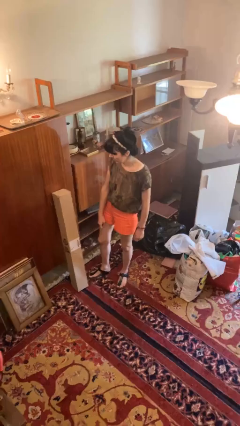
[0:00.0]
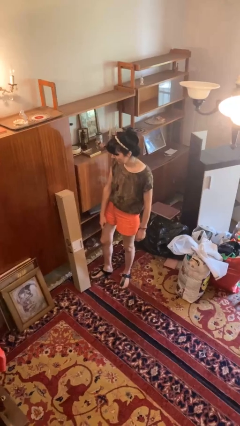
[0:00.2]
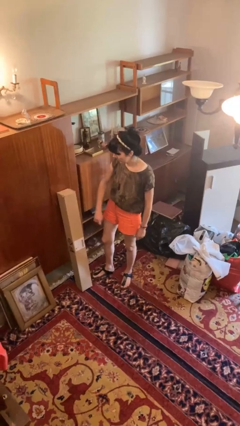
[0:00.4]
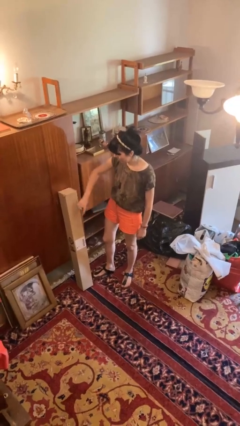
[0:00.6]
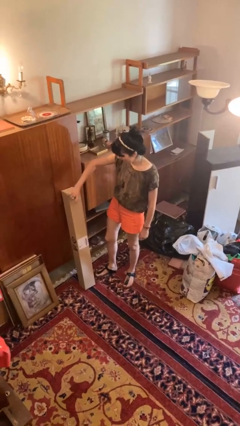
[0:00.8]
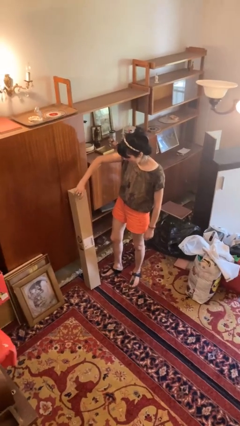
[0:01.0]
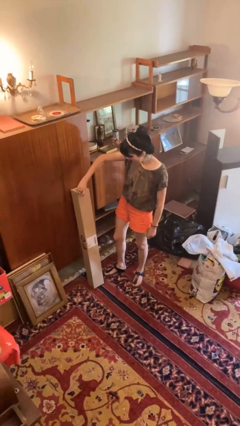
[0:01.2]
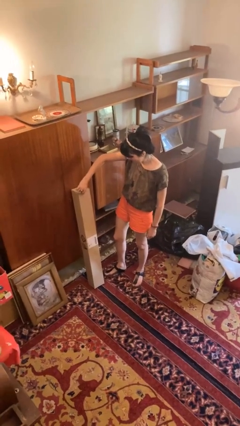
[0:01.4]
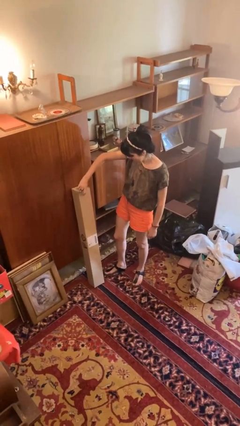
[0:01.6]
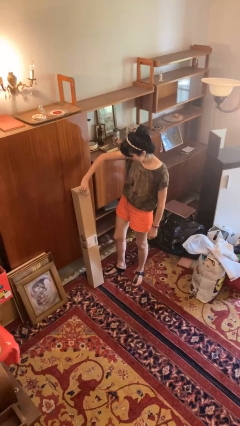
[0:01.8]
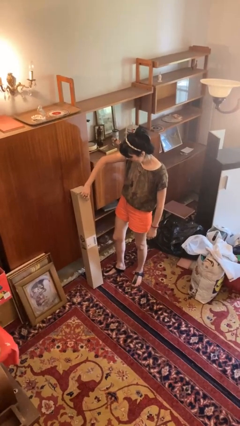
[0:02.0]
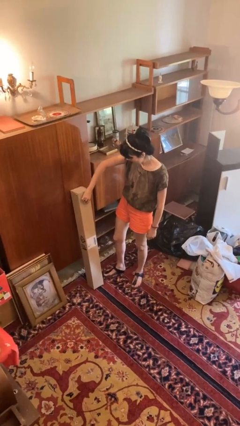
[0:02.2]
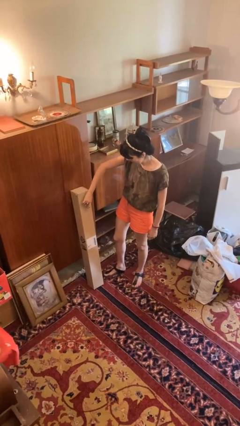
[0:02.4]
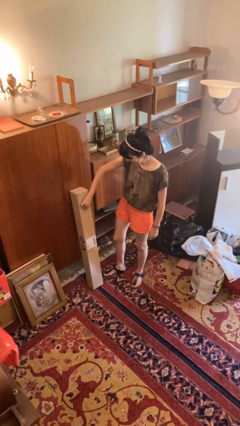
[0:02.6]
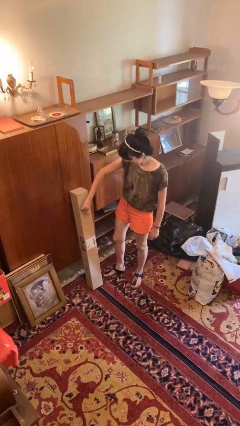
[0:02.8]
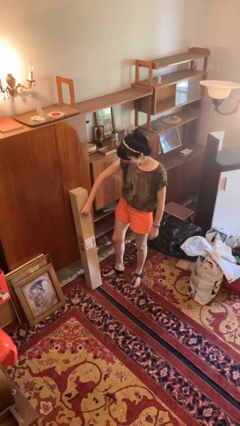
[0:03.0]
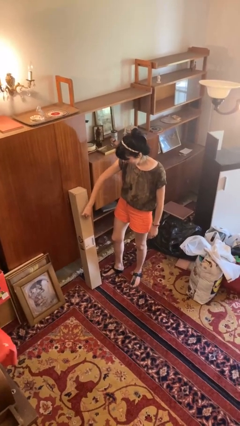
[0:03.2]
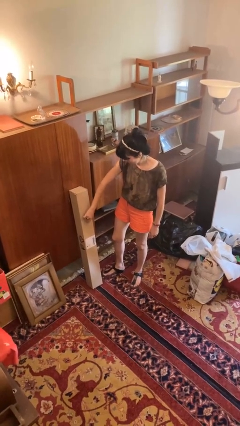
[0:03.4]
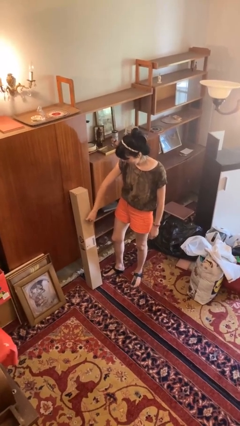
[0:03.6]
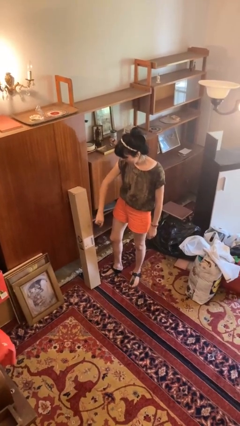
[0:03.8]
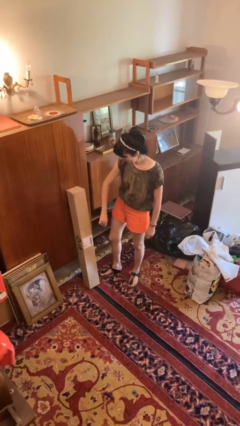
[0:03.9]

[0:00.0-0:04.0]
person taps object with finger

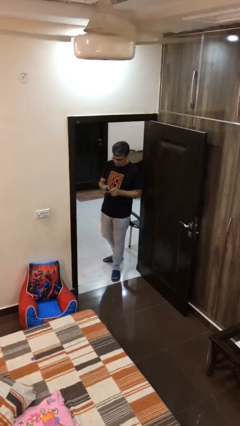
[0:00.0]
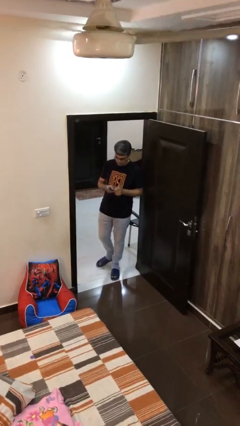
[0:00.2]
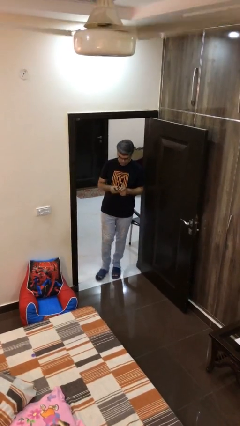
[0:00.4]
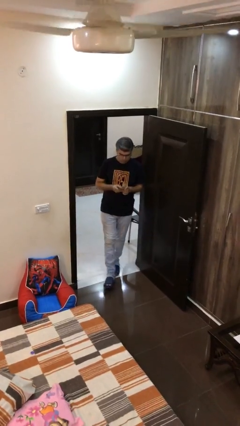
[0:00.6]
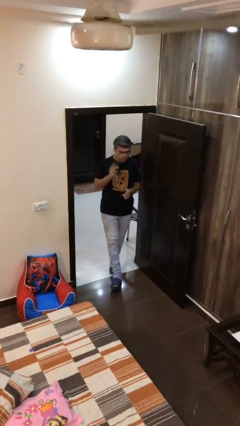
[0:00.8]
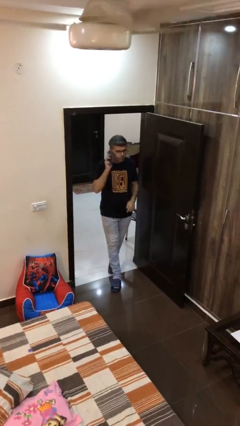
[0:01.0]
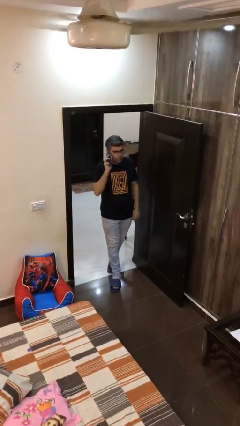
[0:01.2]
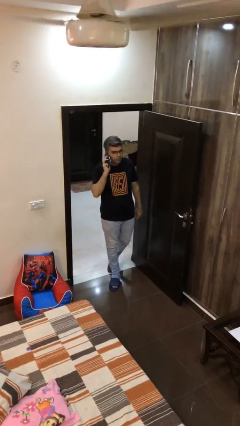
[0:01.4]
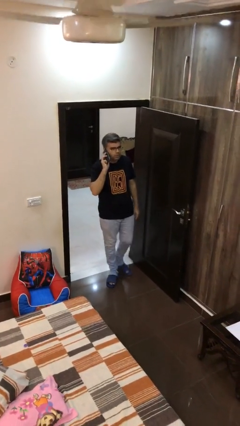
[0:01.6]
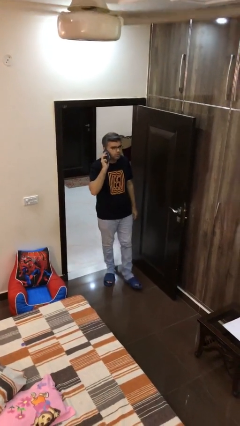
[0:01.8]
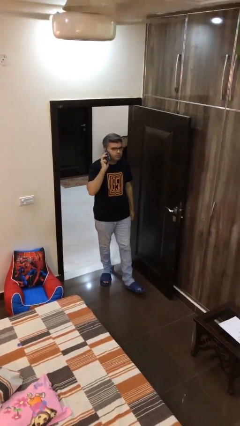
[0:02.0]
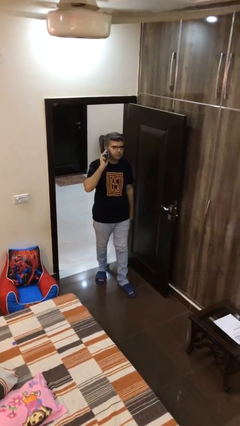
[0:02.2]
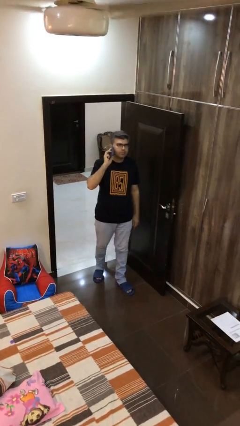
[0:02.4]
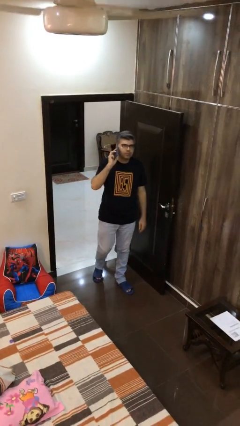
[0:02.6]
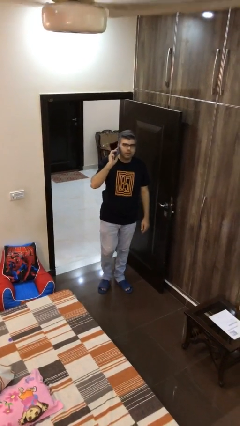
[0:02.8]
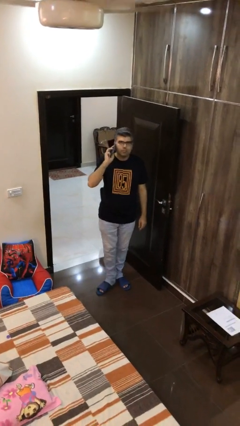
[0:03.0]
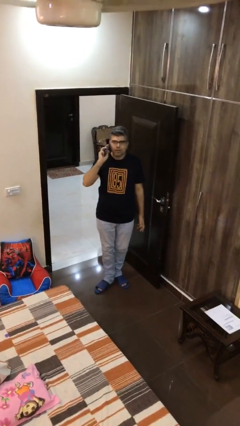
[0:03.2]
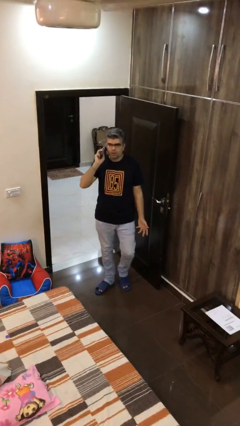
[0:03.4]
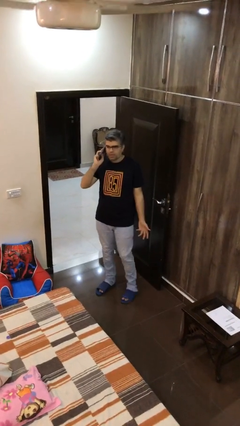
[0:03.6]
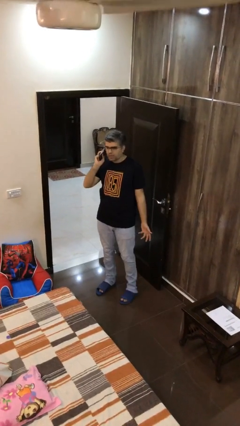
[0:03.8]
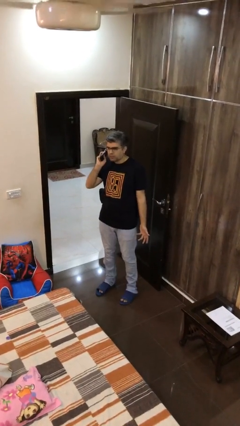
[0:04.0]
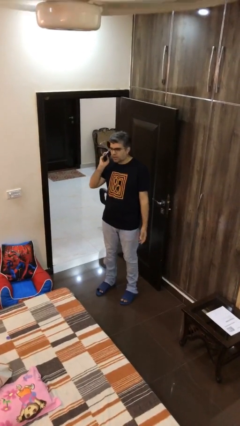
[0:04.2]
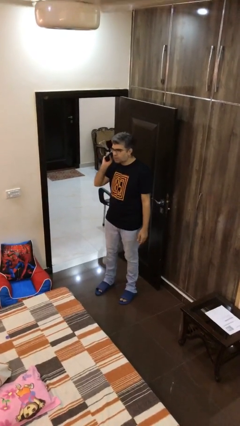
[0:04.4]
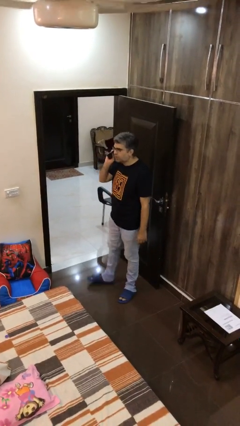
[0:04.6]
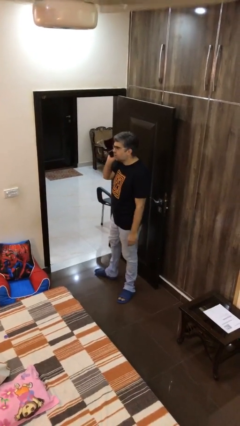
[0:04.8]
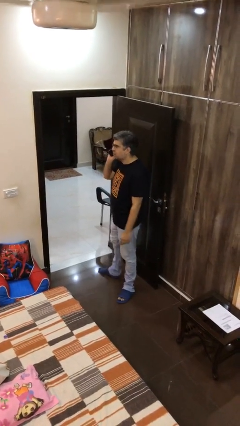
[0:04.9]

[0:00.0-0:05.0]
person talks on phone

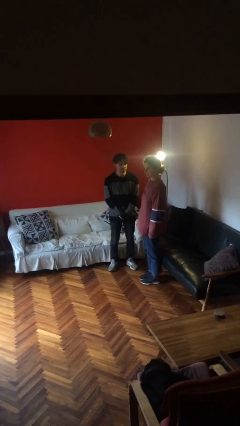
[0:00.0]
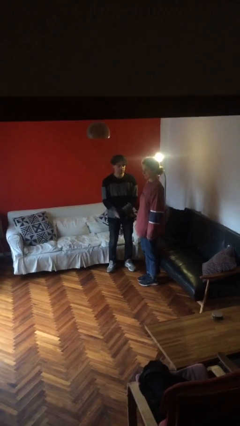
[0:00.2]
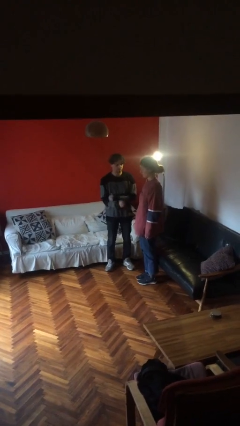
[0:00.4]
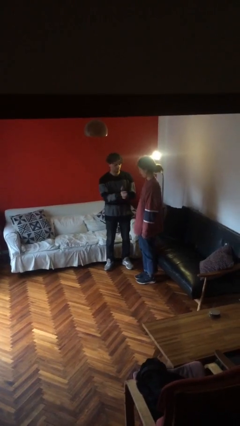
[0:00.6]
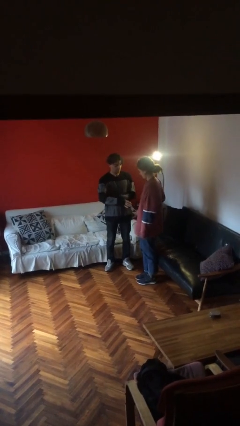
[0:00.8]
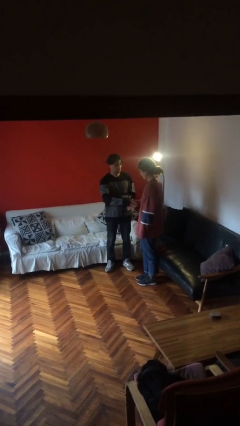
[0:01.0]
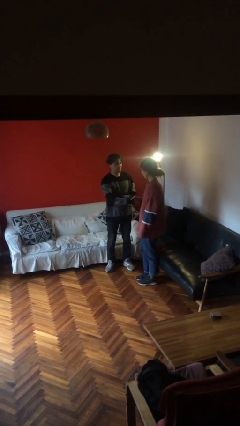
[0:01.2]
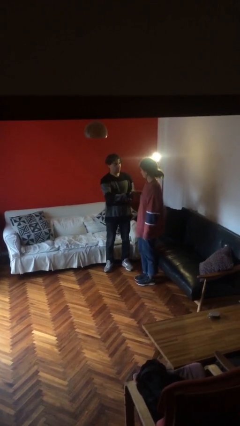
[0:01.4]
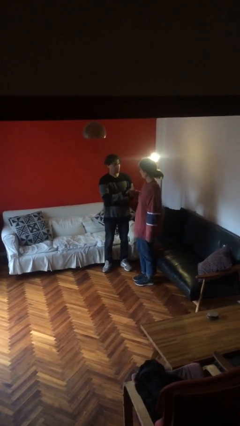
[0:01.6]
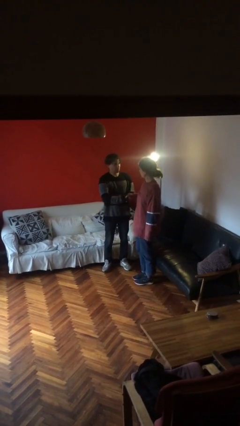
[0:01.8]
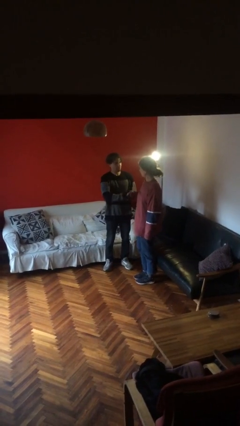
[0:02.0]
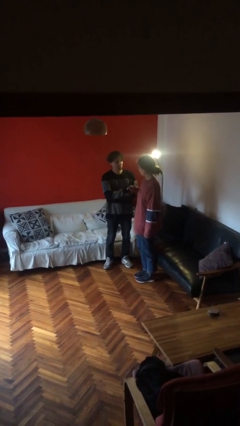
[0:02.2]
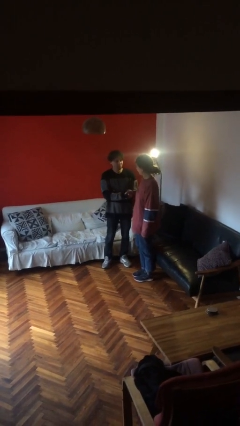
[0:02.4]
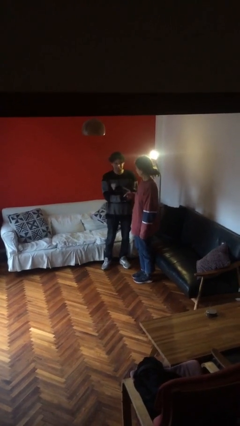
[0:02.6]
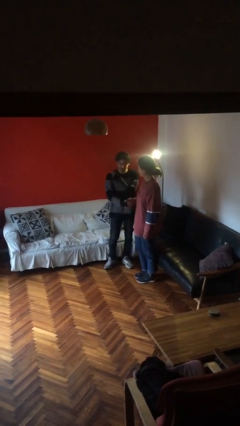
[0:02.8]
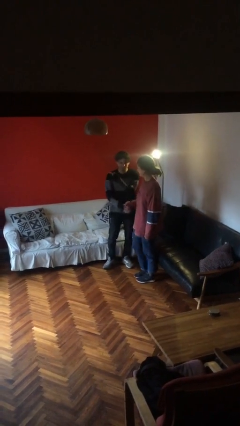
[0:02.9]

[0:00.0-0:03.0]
person shakes hand

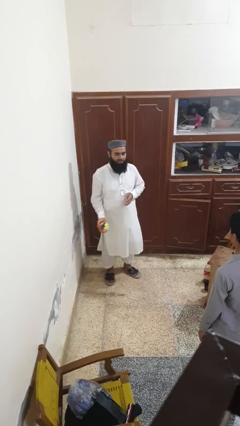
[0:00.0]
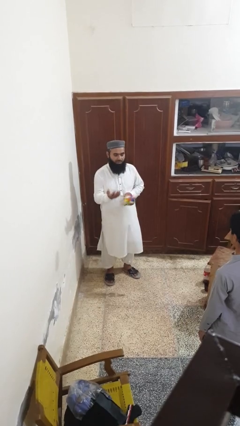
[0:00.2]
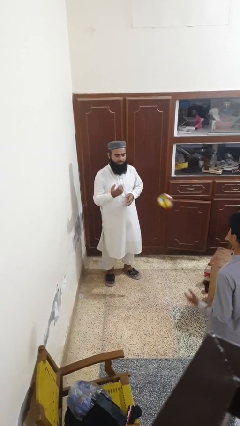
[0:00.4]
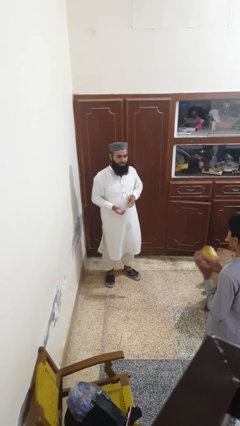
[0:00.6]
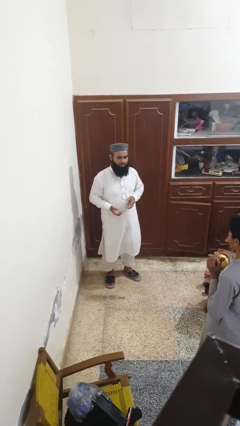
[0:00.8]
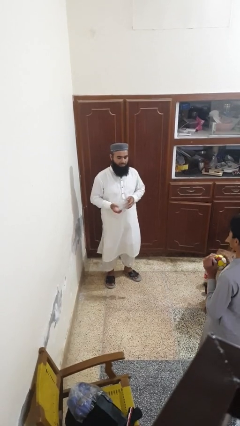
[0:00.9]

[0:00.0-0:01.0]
person throws object to person

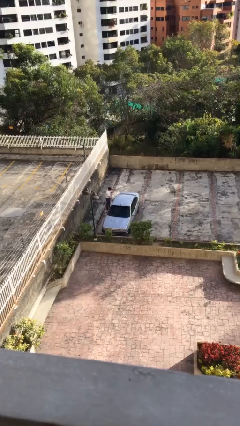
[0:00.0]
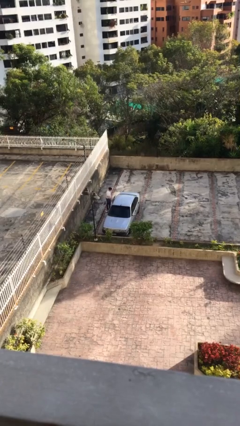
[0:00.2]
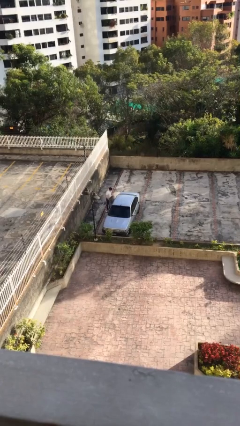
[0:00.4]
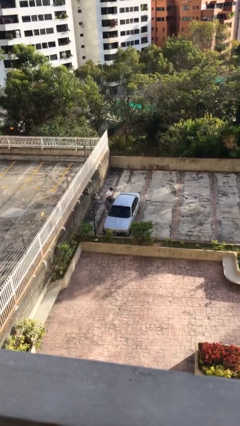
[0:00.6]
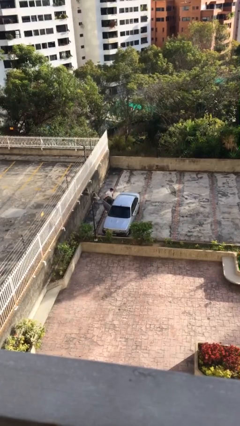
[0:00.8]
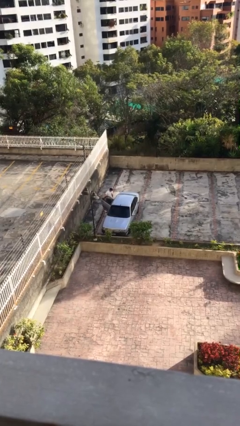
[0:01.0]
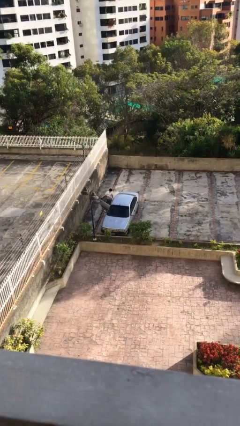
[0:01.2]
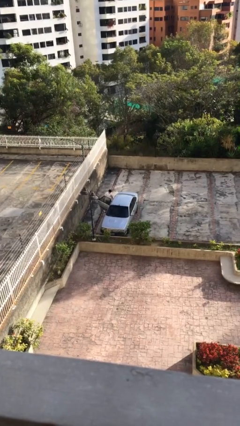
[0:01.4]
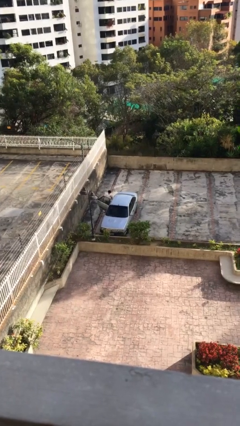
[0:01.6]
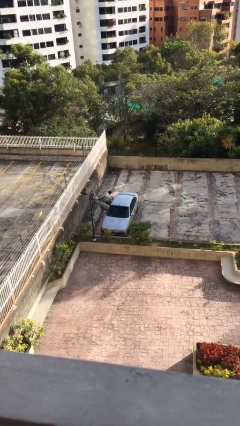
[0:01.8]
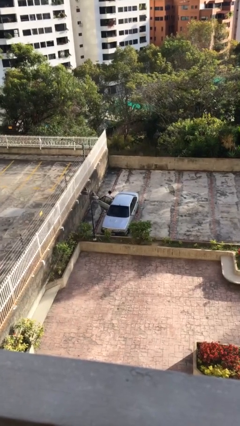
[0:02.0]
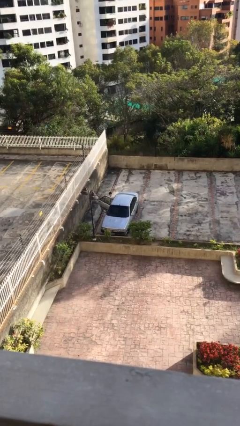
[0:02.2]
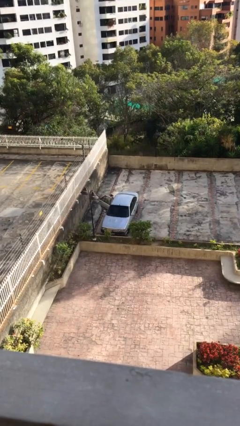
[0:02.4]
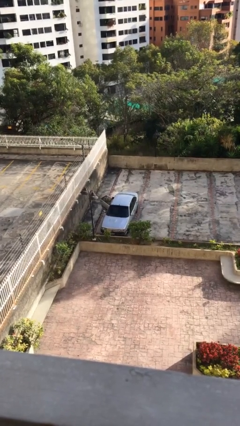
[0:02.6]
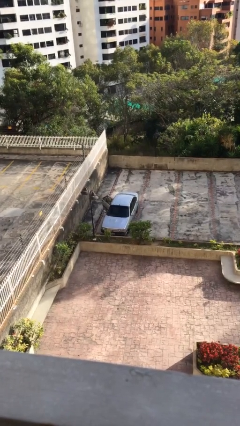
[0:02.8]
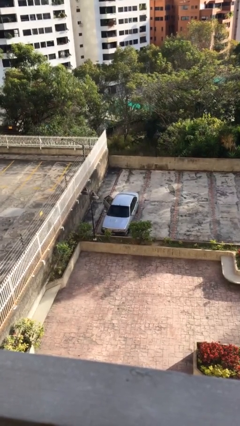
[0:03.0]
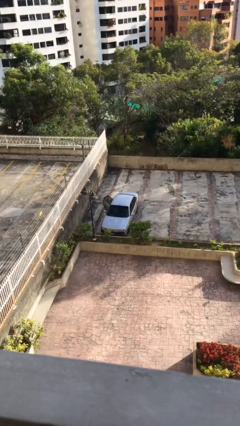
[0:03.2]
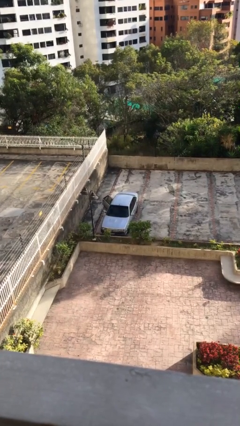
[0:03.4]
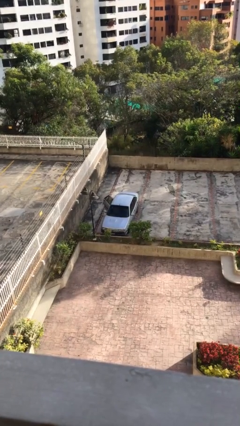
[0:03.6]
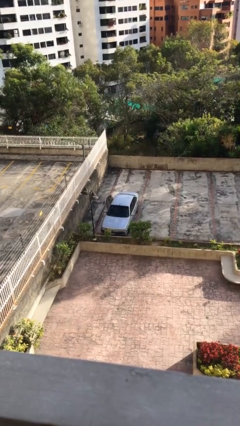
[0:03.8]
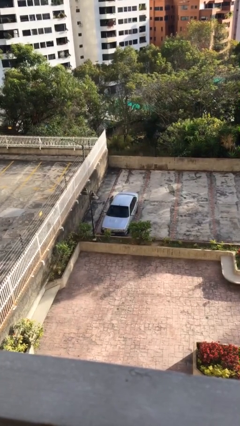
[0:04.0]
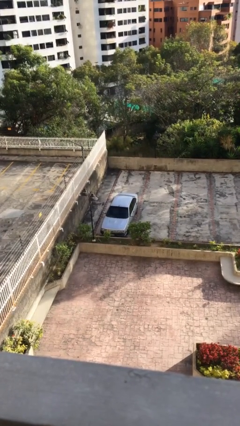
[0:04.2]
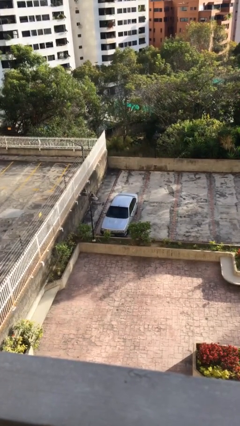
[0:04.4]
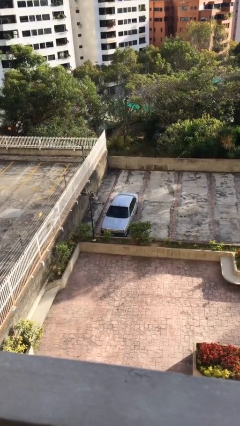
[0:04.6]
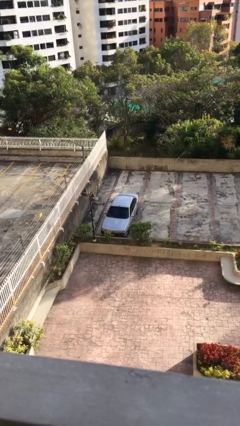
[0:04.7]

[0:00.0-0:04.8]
car picks up person
